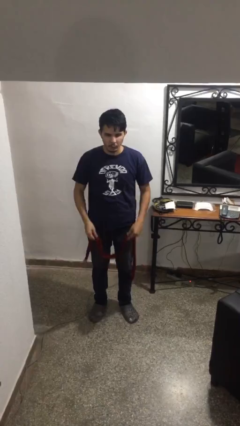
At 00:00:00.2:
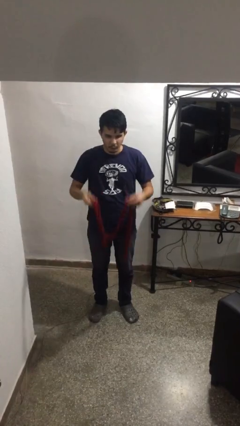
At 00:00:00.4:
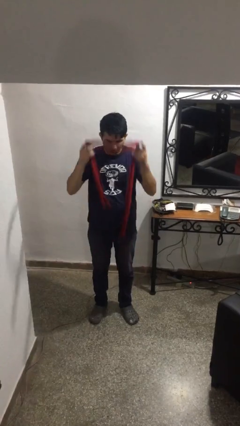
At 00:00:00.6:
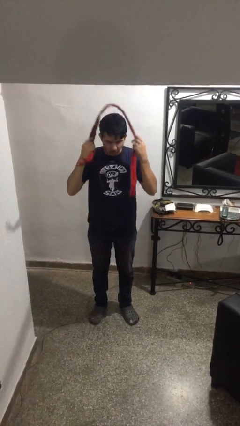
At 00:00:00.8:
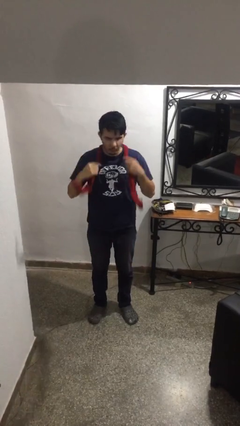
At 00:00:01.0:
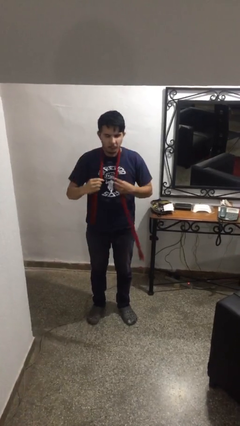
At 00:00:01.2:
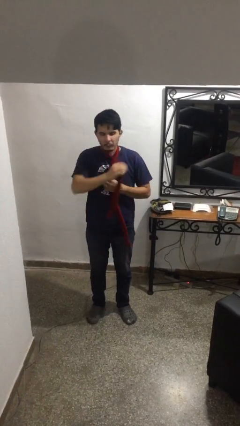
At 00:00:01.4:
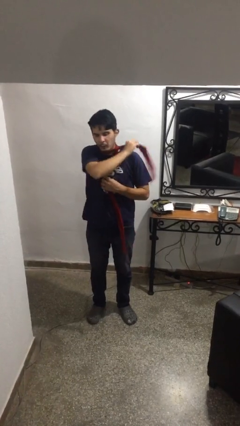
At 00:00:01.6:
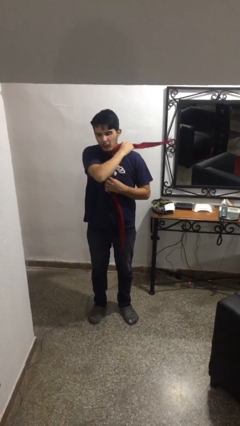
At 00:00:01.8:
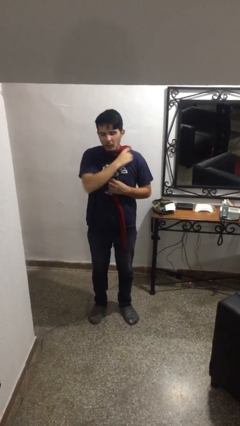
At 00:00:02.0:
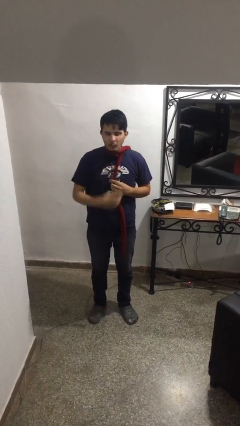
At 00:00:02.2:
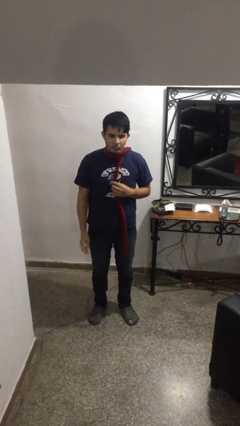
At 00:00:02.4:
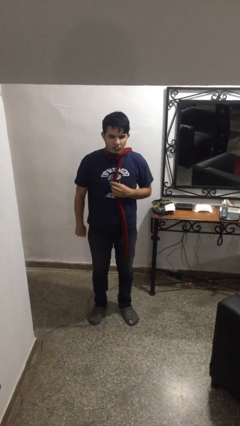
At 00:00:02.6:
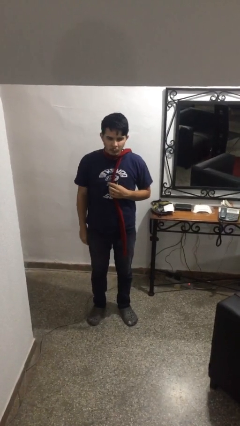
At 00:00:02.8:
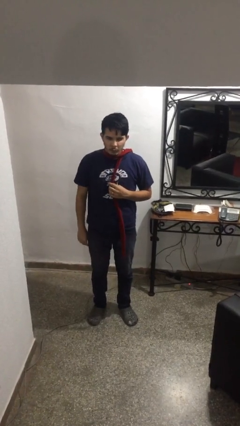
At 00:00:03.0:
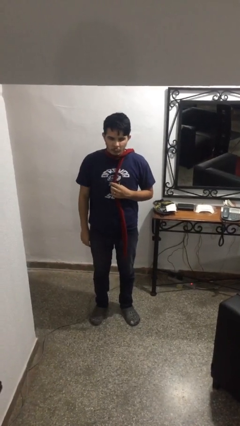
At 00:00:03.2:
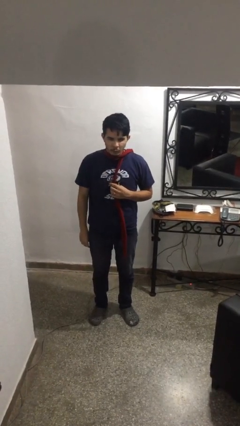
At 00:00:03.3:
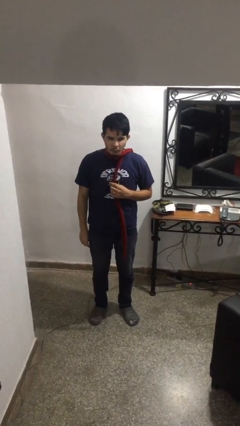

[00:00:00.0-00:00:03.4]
person puts on scarf

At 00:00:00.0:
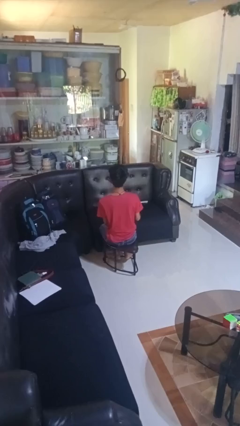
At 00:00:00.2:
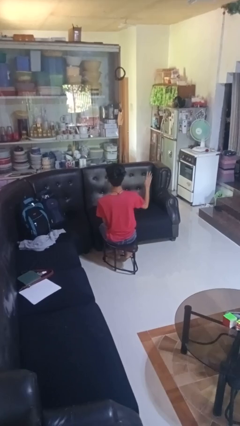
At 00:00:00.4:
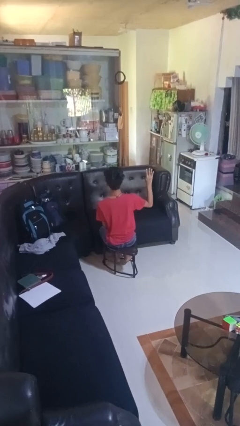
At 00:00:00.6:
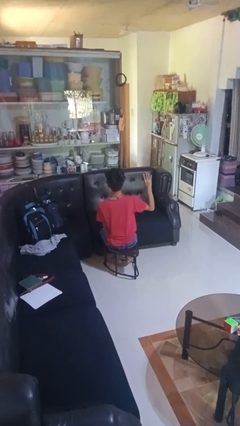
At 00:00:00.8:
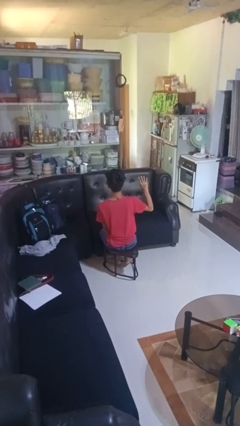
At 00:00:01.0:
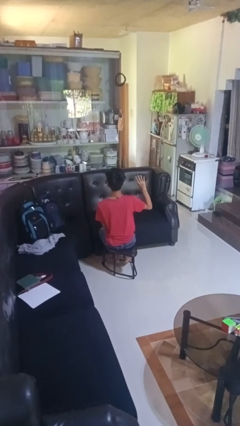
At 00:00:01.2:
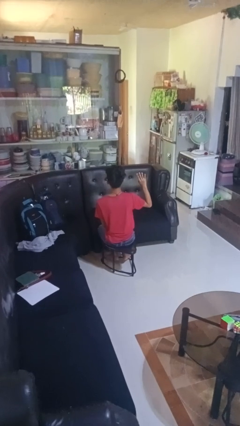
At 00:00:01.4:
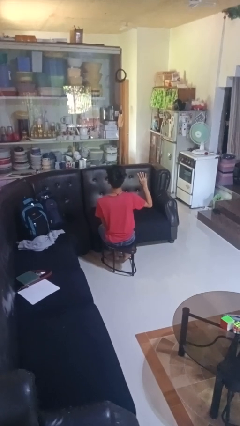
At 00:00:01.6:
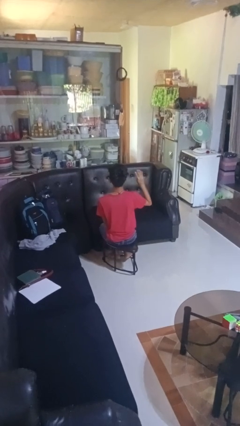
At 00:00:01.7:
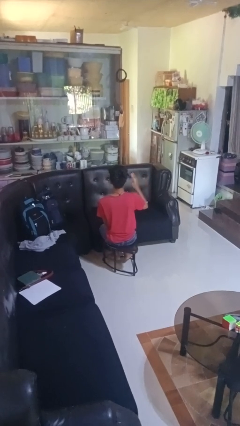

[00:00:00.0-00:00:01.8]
person gestures number four

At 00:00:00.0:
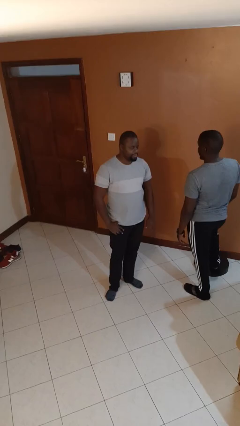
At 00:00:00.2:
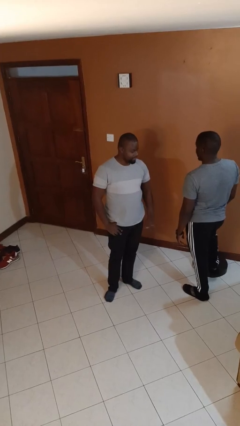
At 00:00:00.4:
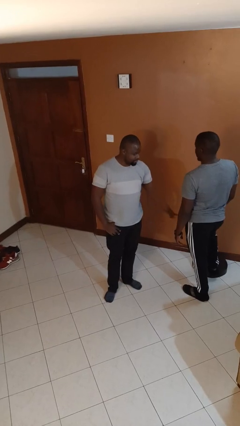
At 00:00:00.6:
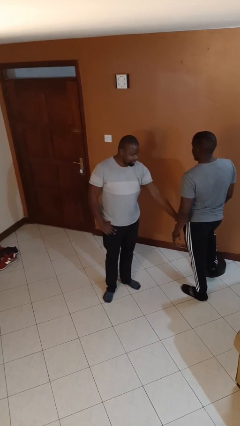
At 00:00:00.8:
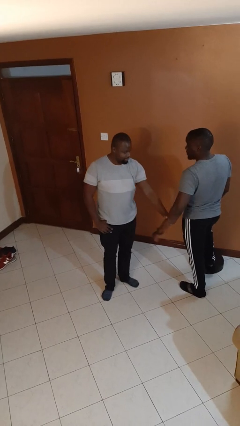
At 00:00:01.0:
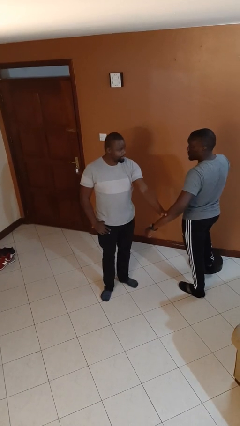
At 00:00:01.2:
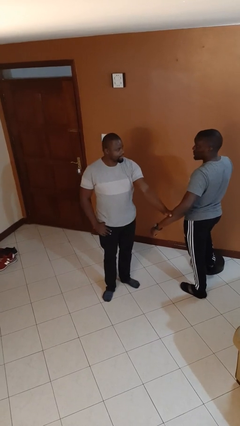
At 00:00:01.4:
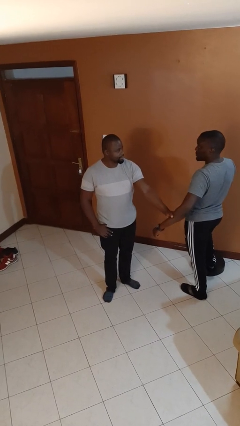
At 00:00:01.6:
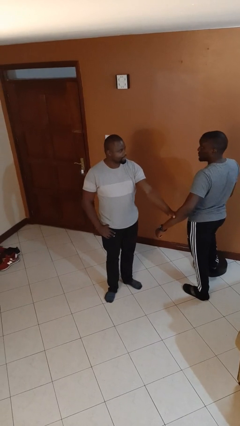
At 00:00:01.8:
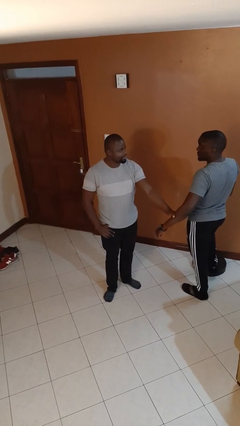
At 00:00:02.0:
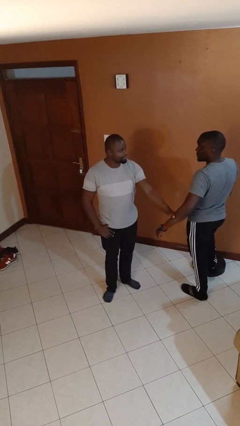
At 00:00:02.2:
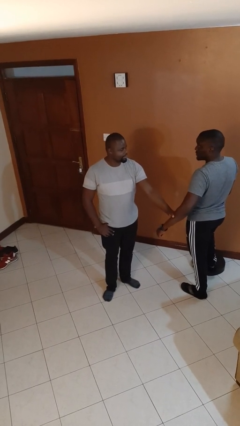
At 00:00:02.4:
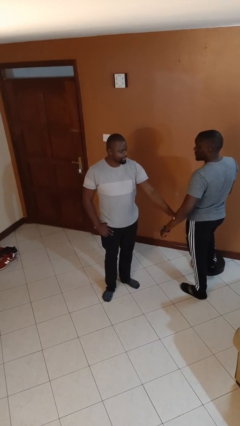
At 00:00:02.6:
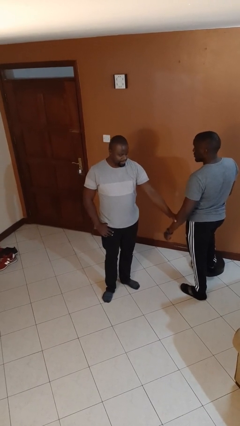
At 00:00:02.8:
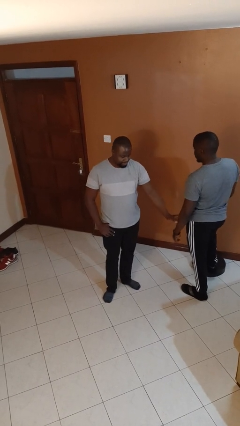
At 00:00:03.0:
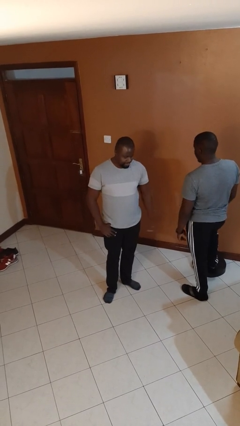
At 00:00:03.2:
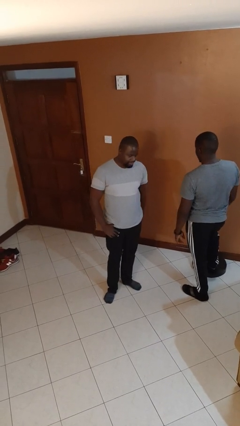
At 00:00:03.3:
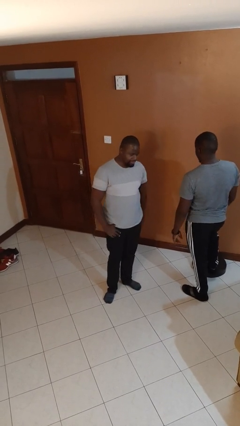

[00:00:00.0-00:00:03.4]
person grabs person by forearm

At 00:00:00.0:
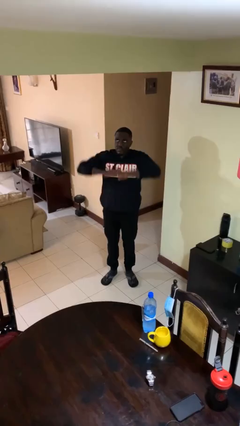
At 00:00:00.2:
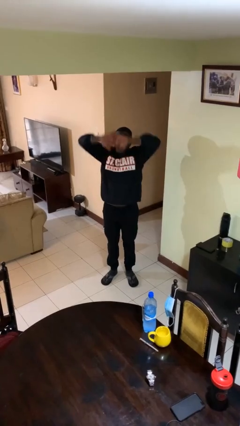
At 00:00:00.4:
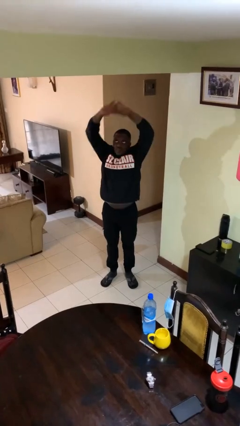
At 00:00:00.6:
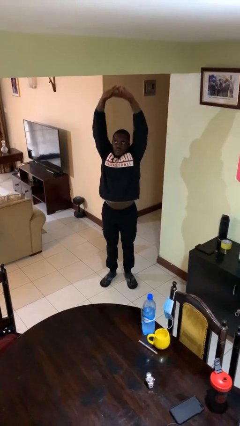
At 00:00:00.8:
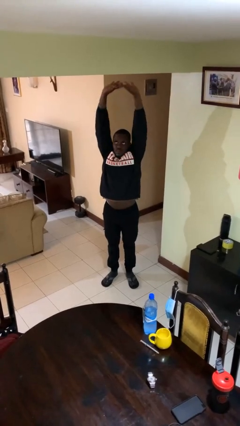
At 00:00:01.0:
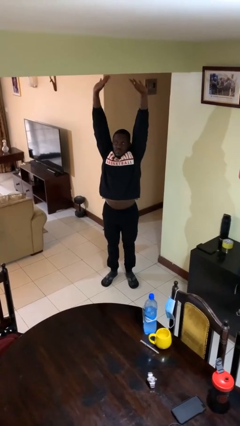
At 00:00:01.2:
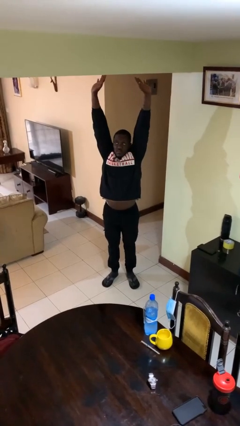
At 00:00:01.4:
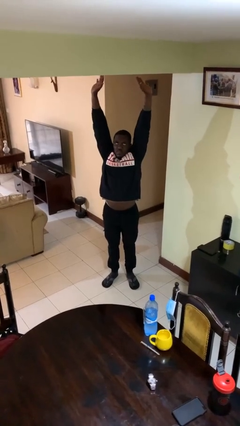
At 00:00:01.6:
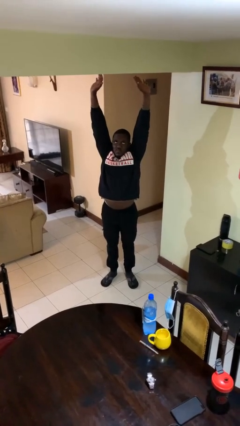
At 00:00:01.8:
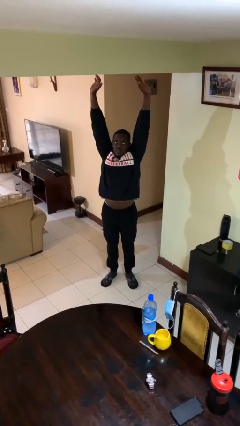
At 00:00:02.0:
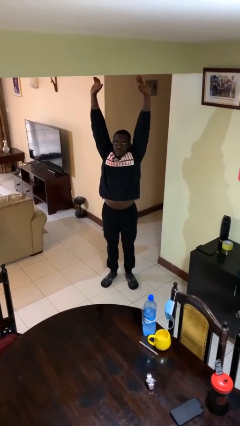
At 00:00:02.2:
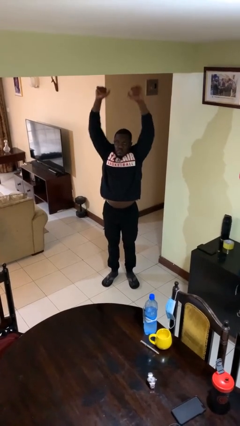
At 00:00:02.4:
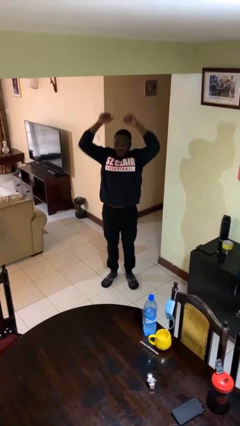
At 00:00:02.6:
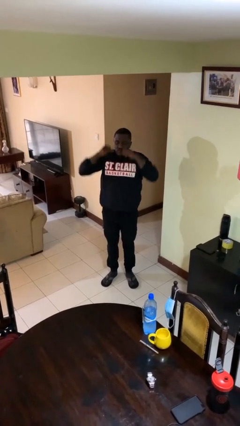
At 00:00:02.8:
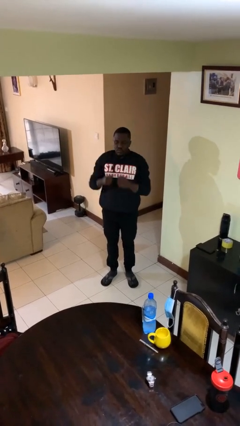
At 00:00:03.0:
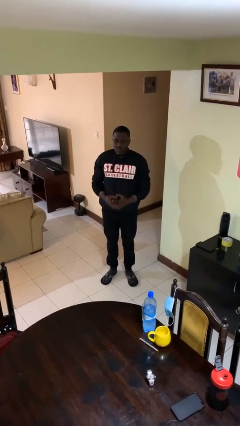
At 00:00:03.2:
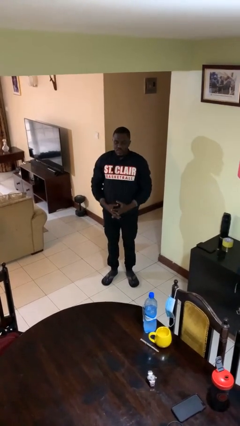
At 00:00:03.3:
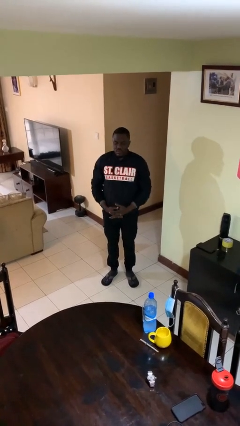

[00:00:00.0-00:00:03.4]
person stretches arms over head

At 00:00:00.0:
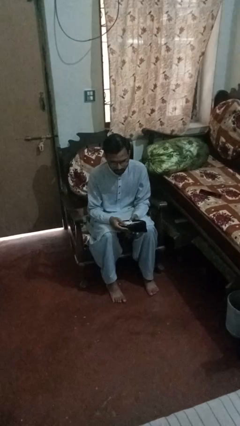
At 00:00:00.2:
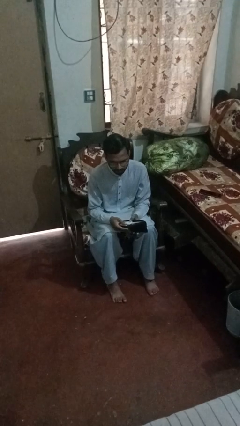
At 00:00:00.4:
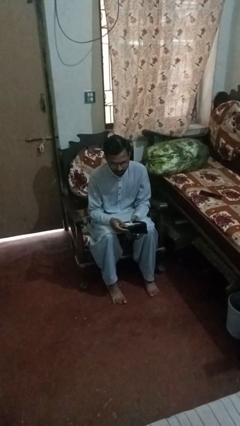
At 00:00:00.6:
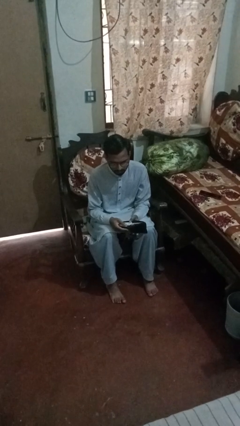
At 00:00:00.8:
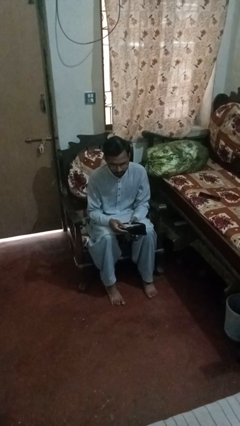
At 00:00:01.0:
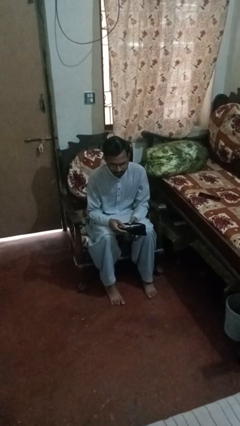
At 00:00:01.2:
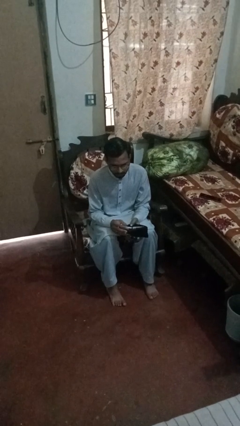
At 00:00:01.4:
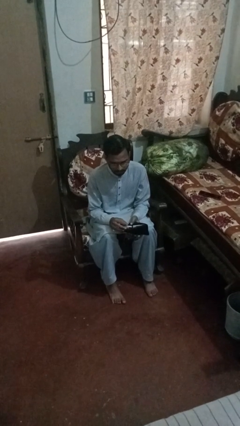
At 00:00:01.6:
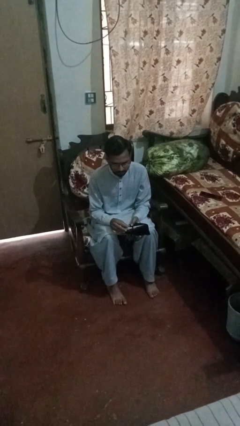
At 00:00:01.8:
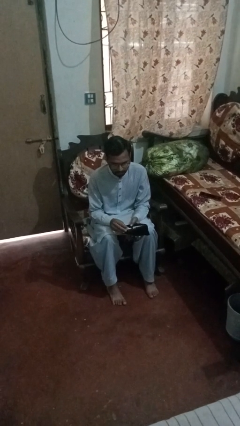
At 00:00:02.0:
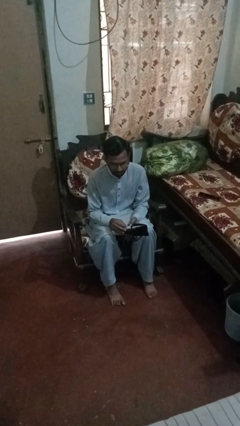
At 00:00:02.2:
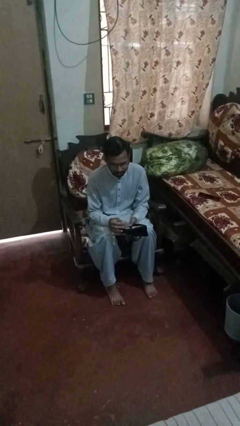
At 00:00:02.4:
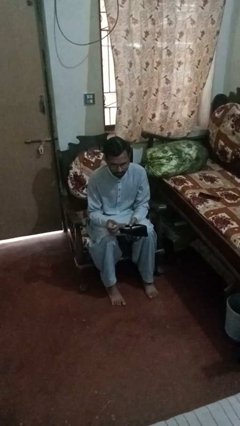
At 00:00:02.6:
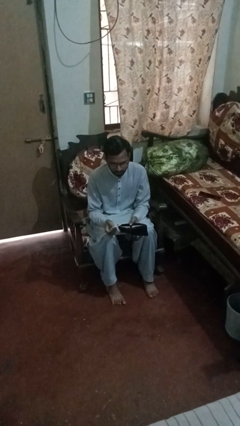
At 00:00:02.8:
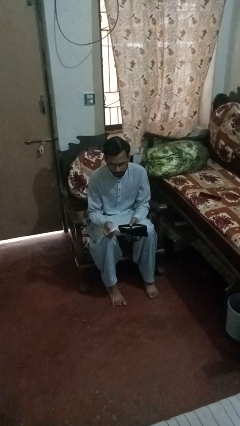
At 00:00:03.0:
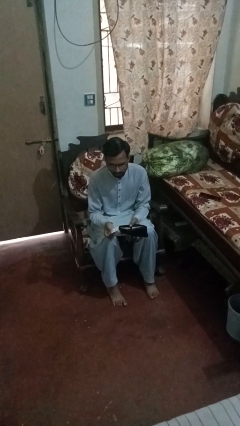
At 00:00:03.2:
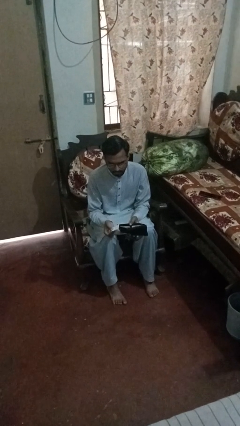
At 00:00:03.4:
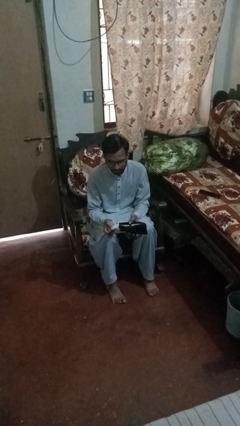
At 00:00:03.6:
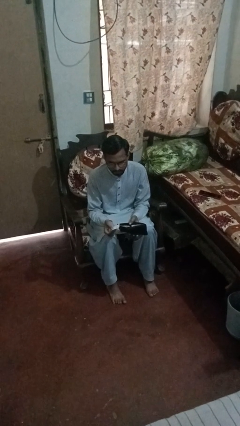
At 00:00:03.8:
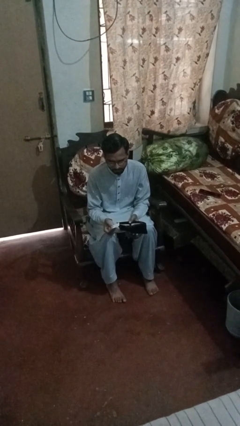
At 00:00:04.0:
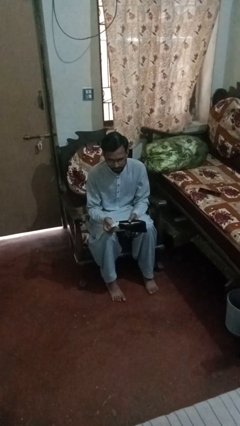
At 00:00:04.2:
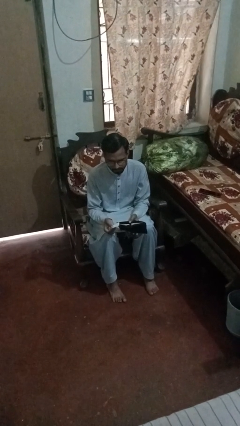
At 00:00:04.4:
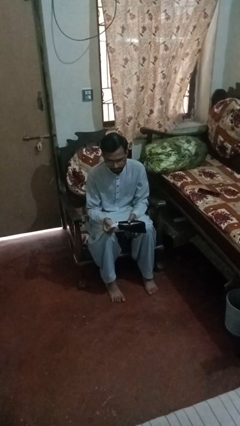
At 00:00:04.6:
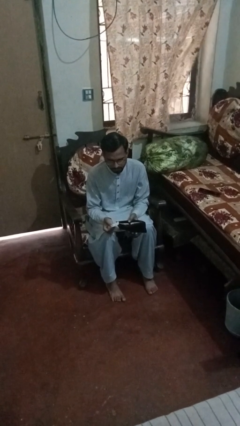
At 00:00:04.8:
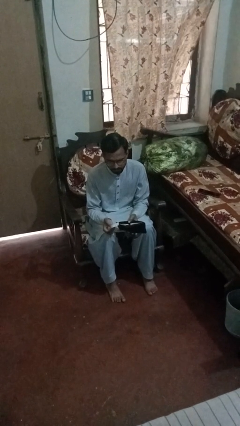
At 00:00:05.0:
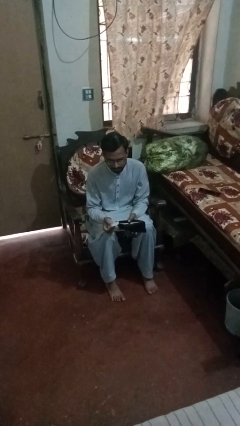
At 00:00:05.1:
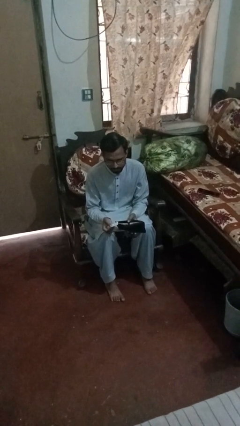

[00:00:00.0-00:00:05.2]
person takes object from purse
